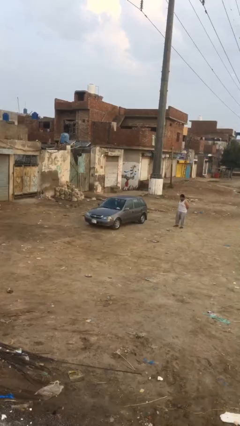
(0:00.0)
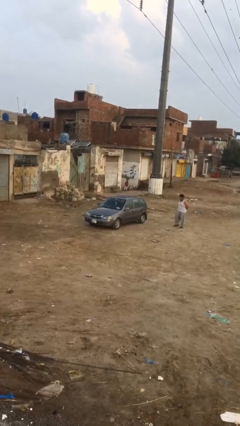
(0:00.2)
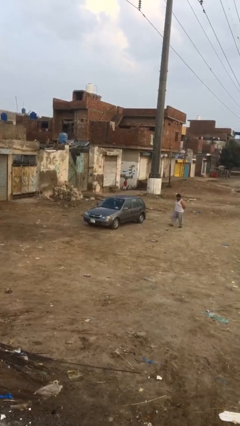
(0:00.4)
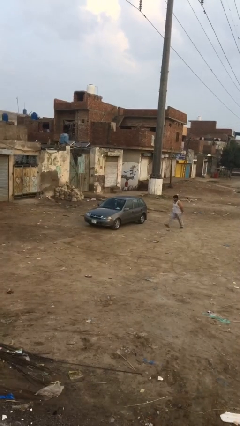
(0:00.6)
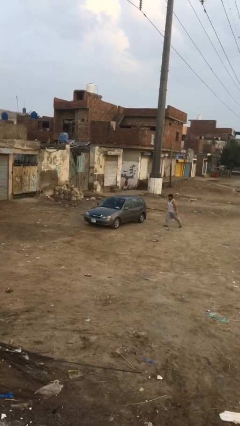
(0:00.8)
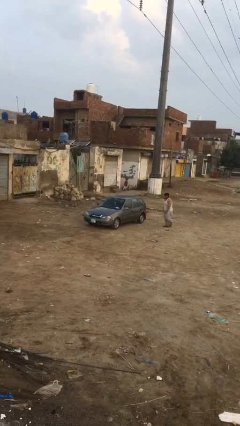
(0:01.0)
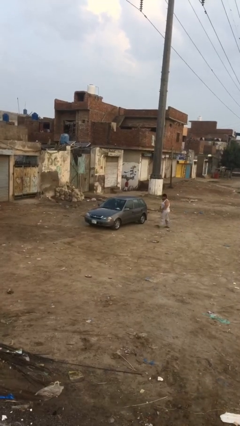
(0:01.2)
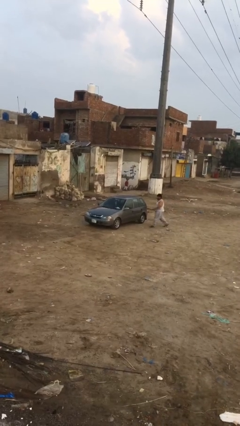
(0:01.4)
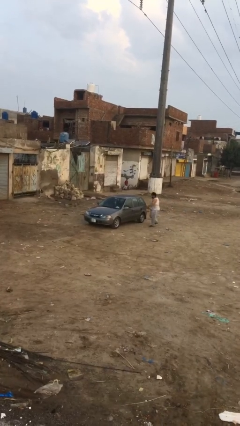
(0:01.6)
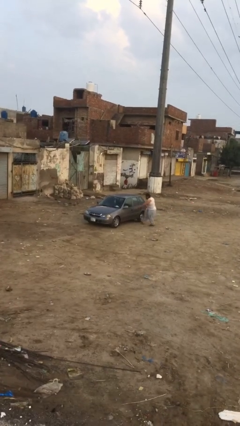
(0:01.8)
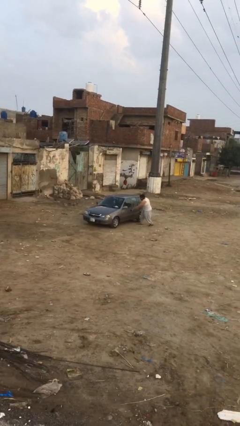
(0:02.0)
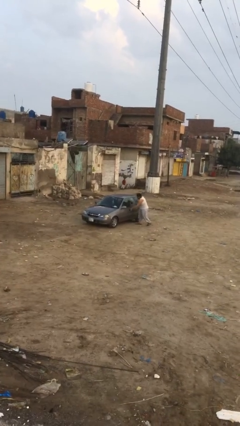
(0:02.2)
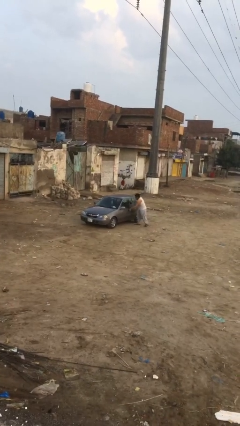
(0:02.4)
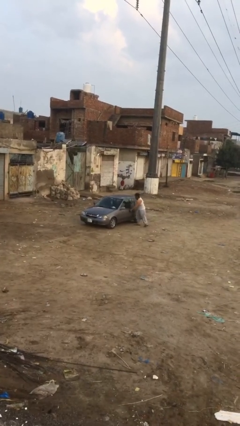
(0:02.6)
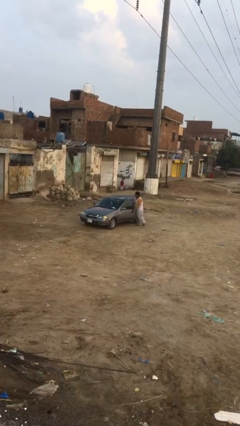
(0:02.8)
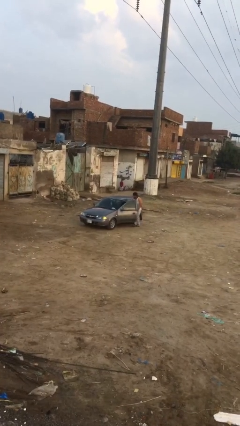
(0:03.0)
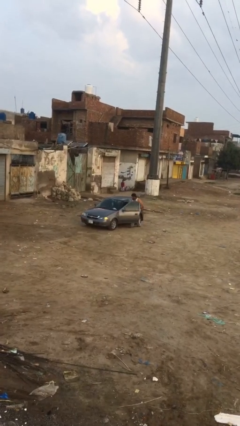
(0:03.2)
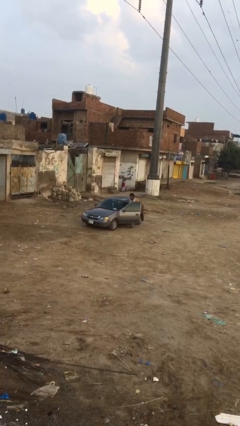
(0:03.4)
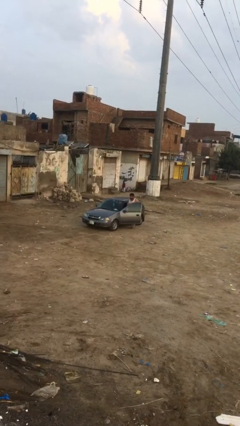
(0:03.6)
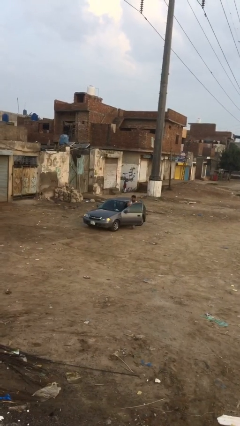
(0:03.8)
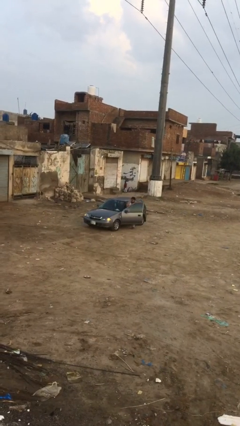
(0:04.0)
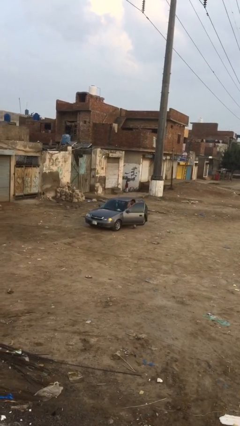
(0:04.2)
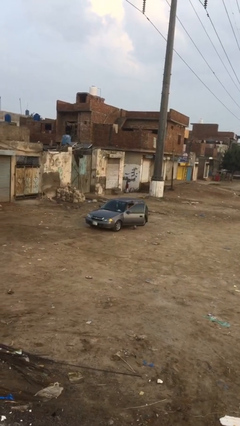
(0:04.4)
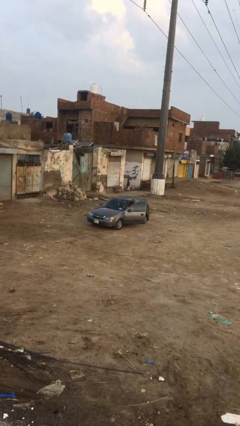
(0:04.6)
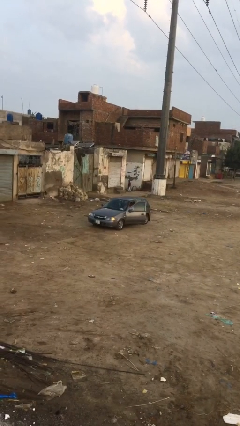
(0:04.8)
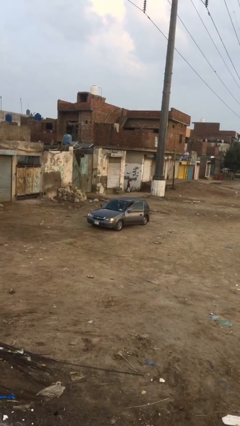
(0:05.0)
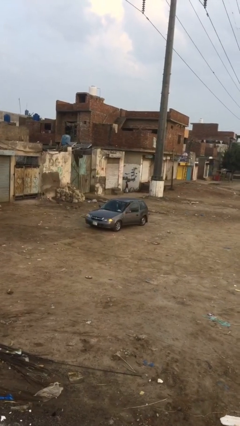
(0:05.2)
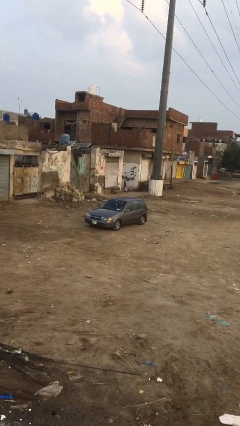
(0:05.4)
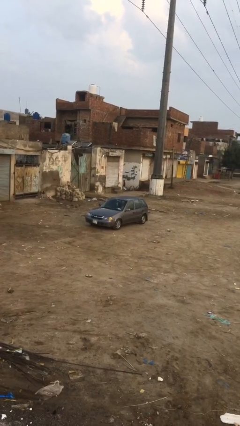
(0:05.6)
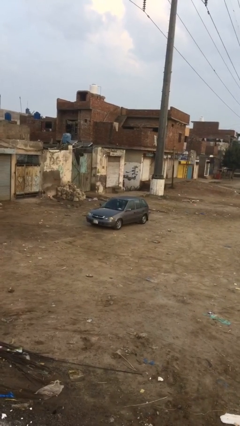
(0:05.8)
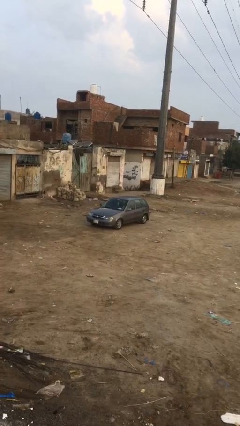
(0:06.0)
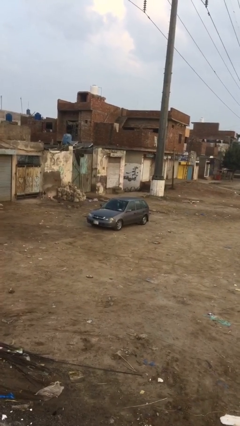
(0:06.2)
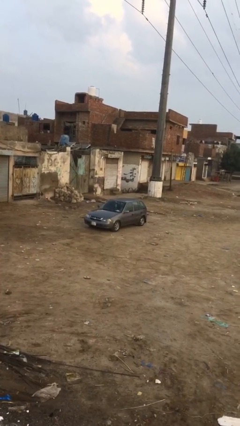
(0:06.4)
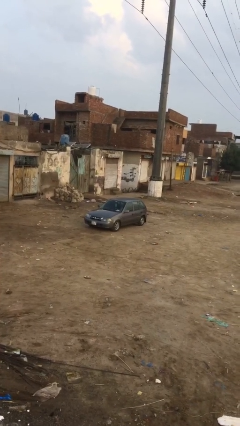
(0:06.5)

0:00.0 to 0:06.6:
car picks up person

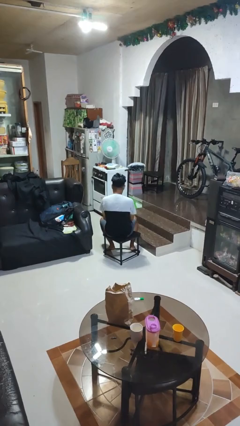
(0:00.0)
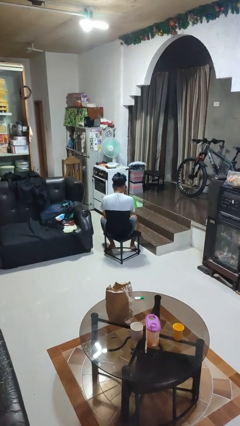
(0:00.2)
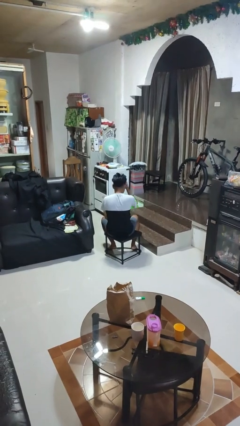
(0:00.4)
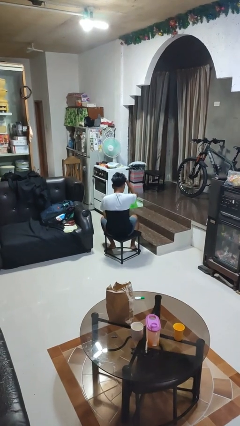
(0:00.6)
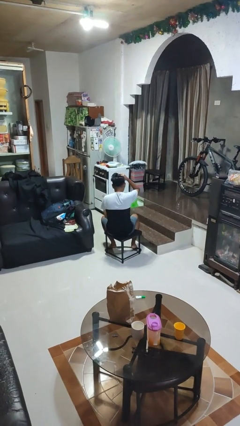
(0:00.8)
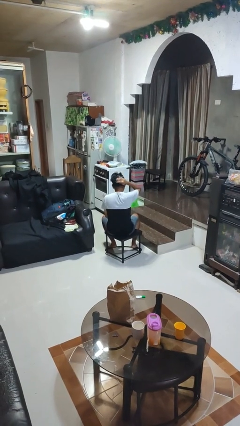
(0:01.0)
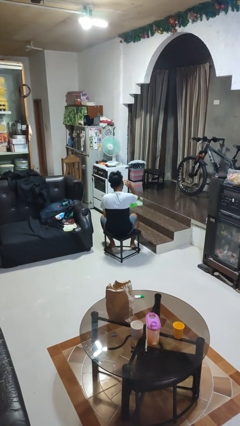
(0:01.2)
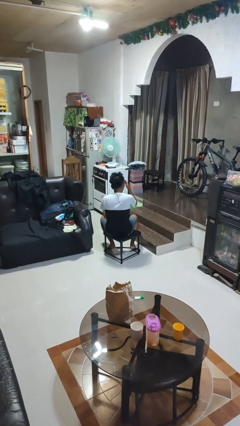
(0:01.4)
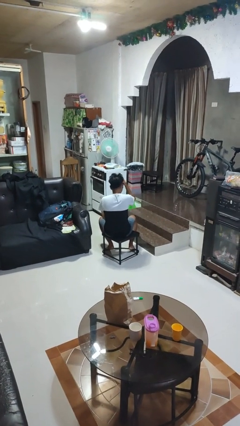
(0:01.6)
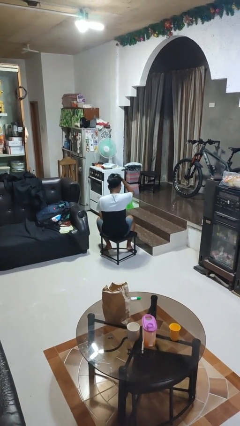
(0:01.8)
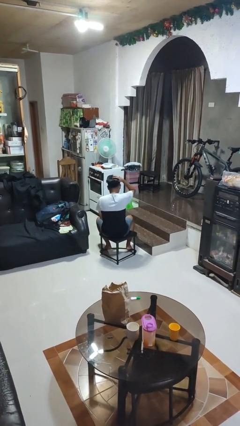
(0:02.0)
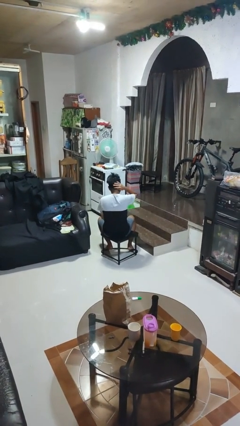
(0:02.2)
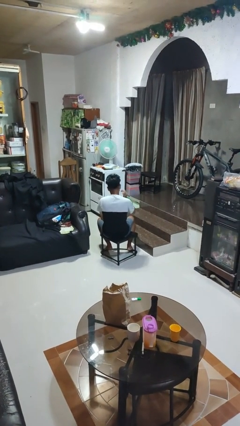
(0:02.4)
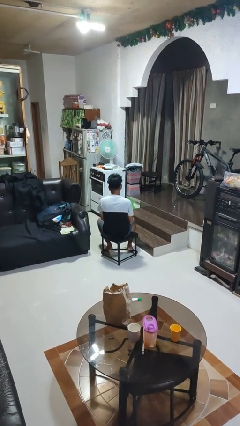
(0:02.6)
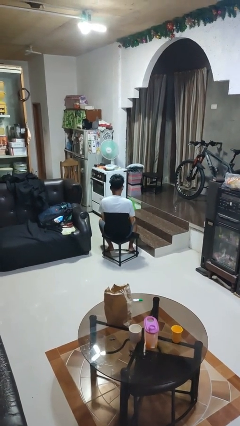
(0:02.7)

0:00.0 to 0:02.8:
person strokes hair

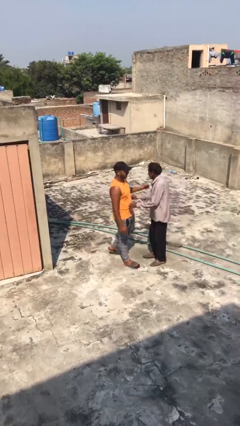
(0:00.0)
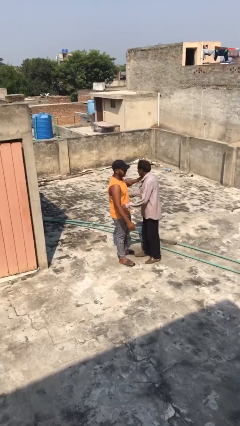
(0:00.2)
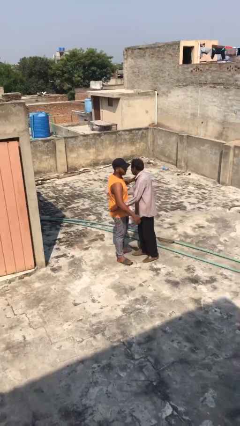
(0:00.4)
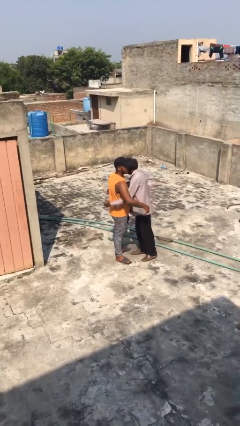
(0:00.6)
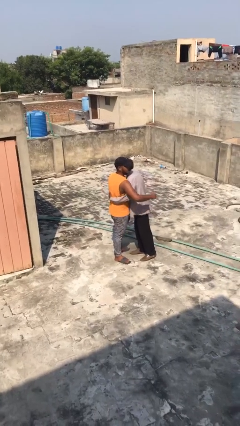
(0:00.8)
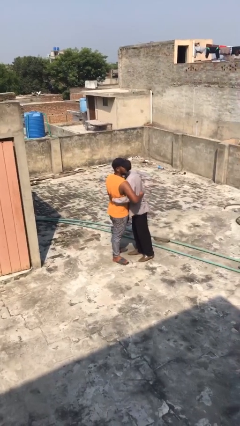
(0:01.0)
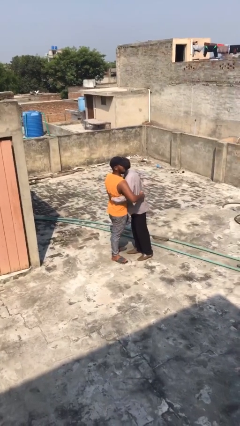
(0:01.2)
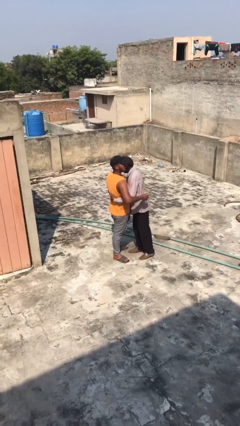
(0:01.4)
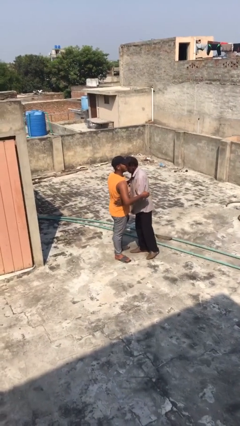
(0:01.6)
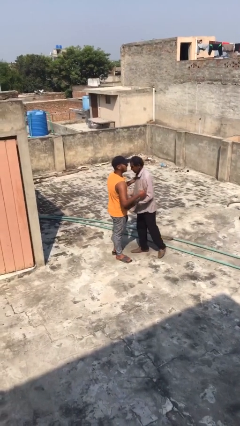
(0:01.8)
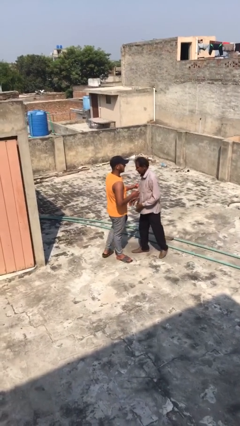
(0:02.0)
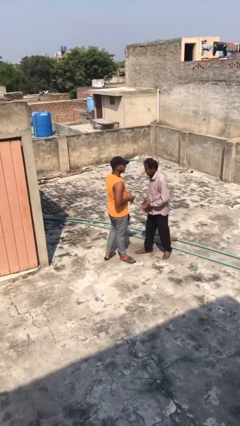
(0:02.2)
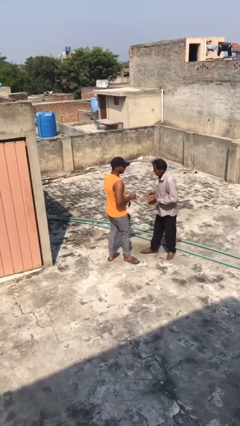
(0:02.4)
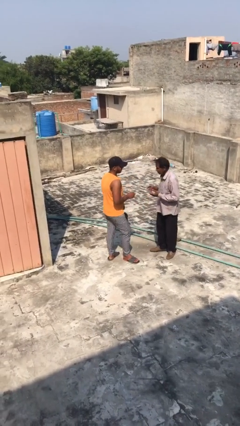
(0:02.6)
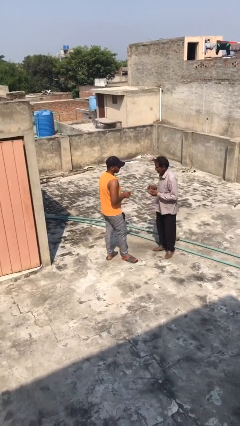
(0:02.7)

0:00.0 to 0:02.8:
person embraces person

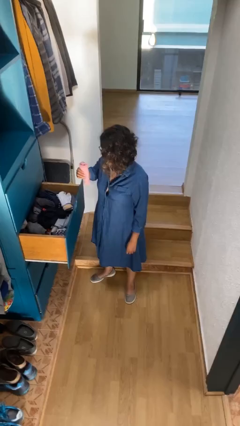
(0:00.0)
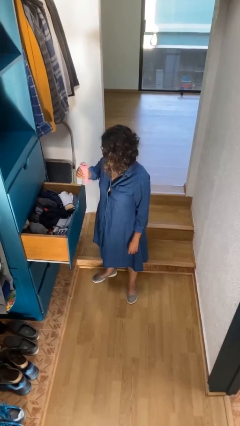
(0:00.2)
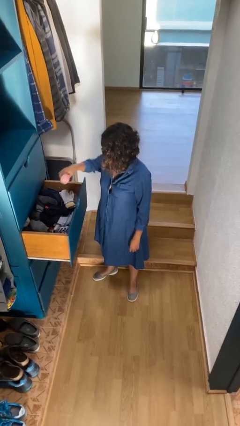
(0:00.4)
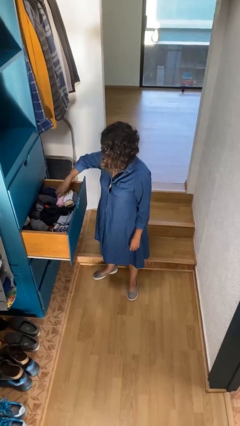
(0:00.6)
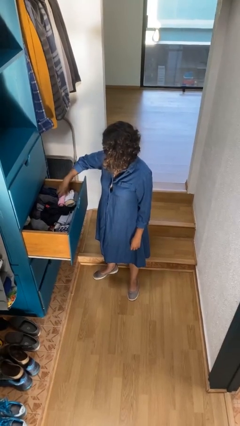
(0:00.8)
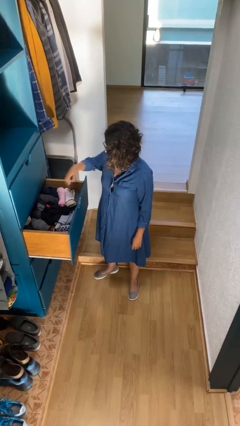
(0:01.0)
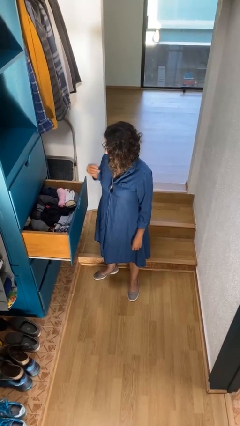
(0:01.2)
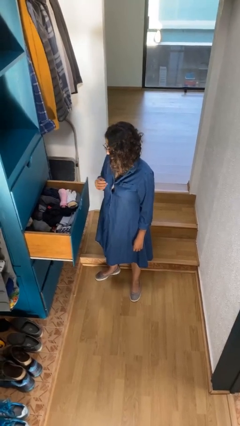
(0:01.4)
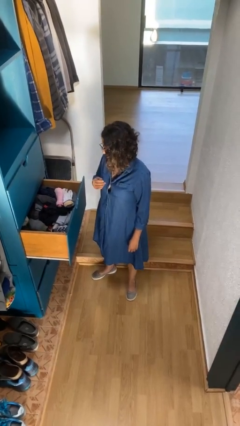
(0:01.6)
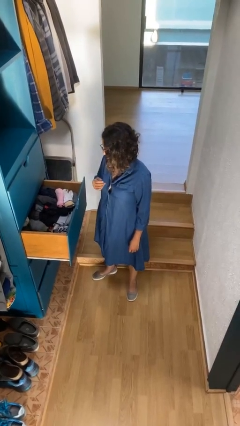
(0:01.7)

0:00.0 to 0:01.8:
person puts clothes into dresser

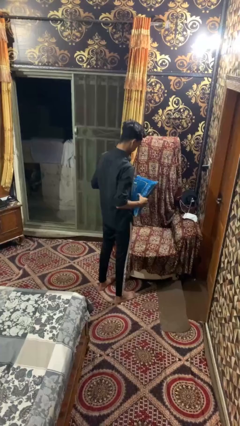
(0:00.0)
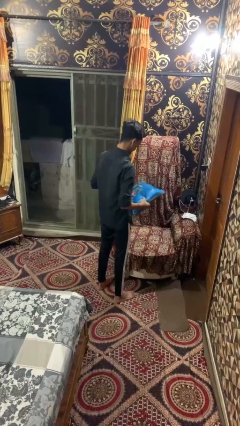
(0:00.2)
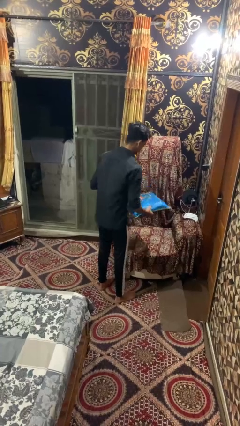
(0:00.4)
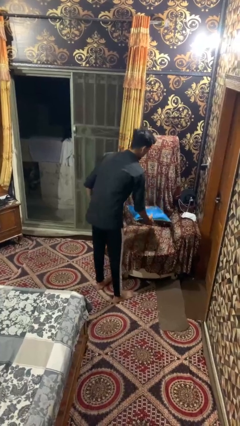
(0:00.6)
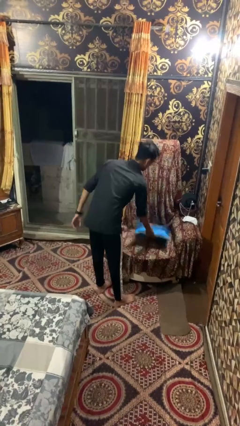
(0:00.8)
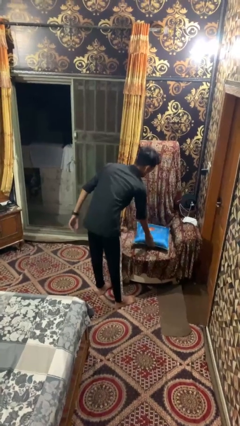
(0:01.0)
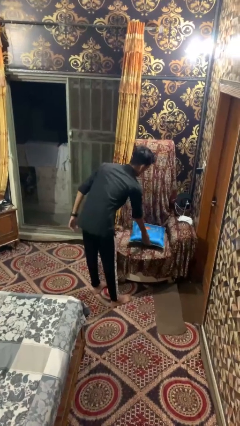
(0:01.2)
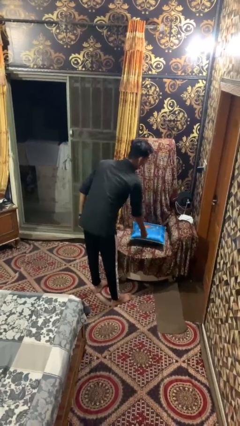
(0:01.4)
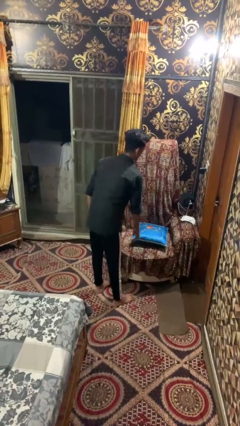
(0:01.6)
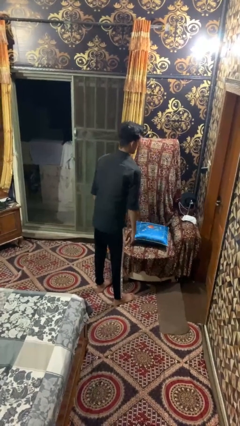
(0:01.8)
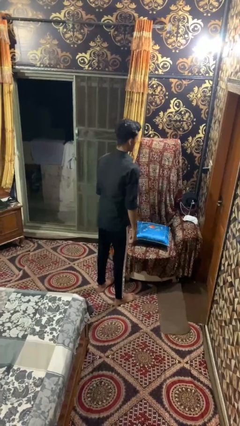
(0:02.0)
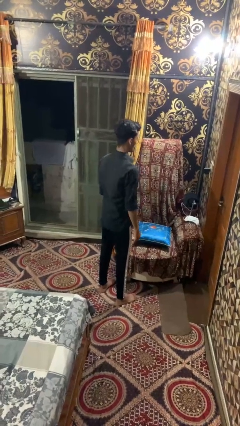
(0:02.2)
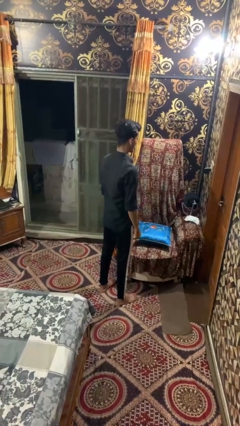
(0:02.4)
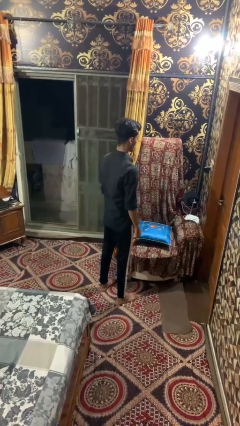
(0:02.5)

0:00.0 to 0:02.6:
person puts down object on couch

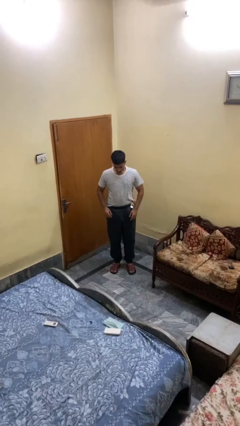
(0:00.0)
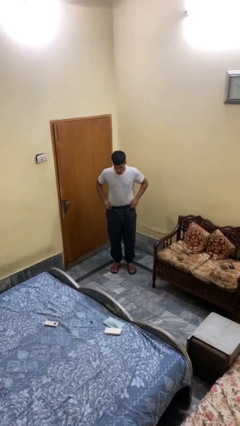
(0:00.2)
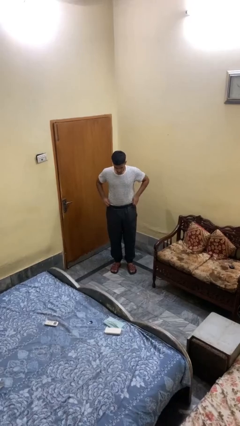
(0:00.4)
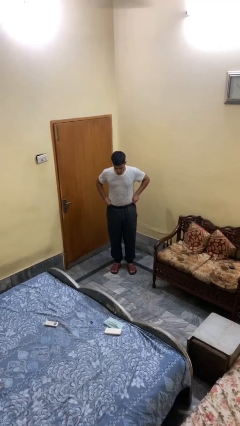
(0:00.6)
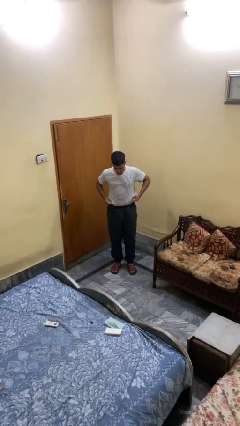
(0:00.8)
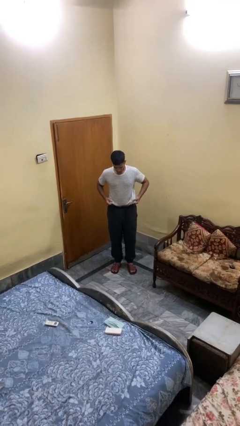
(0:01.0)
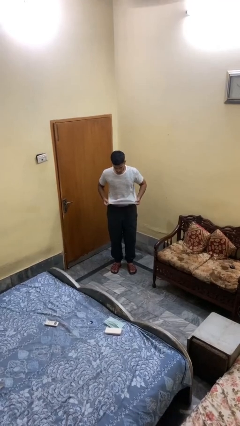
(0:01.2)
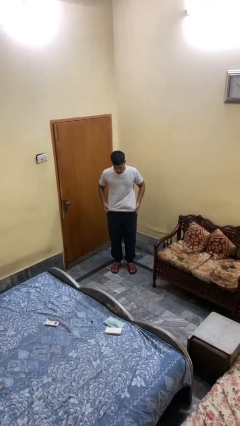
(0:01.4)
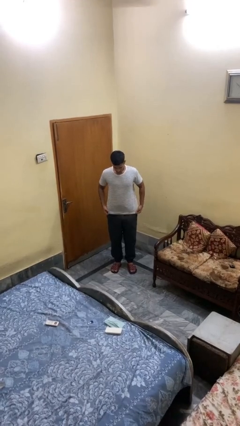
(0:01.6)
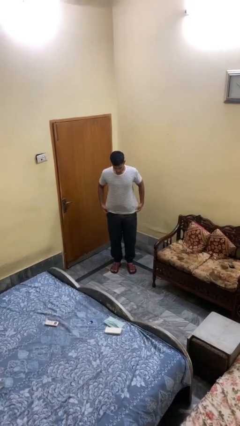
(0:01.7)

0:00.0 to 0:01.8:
person untucks shirt
